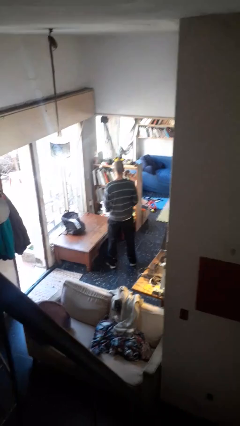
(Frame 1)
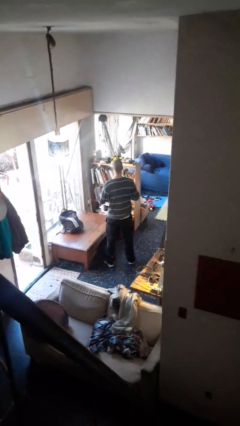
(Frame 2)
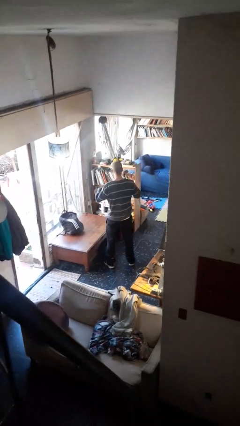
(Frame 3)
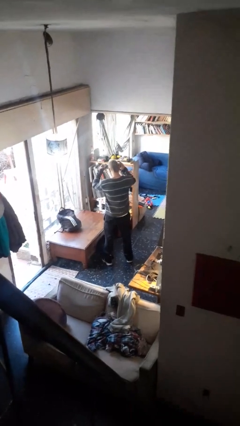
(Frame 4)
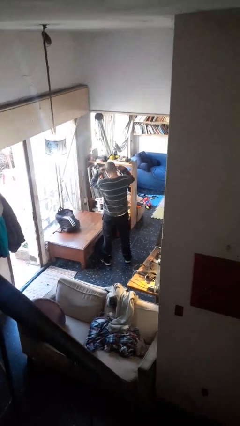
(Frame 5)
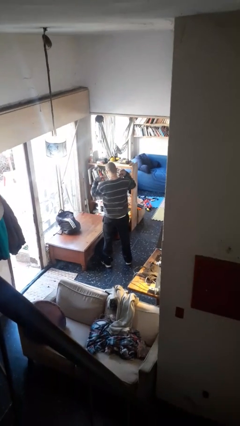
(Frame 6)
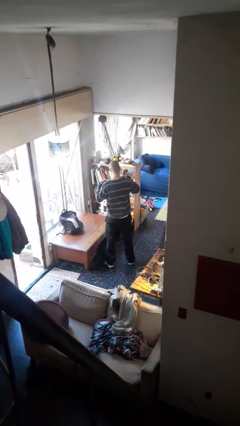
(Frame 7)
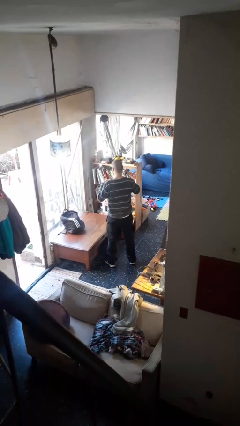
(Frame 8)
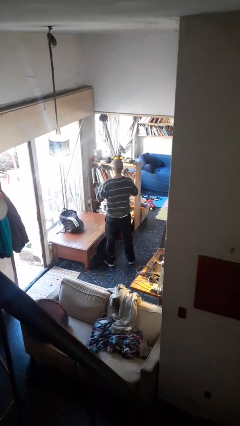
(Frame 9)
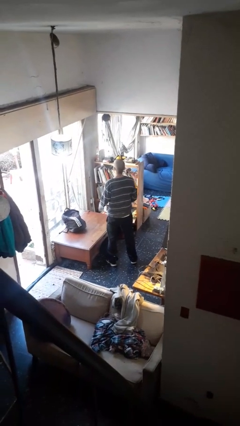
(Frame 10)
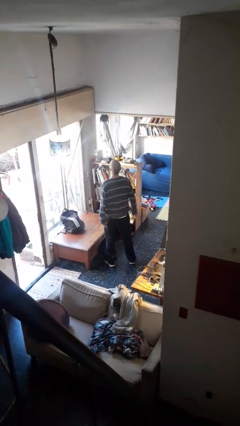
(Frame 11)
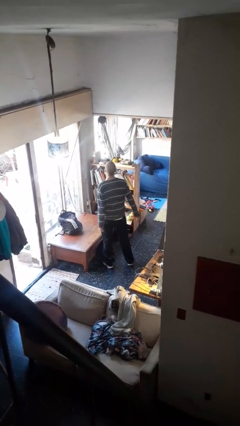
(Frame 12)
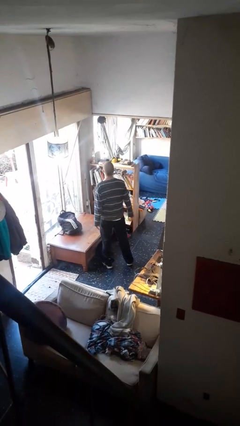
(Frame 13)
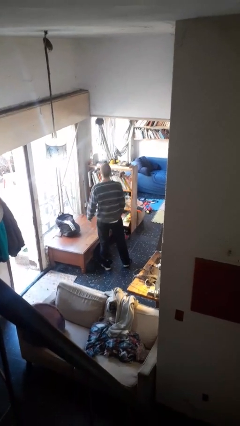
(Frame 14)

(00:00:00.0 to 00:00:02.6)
person puts on necklace

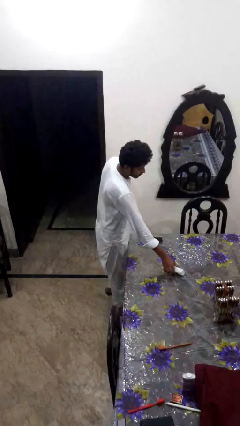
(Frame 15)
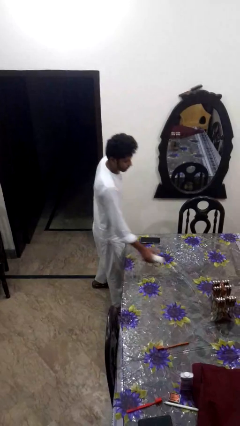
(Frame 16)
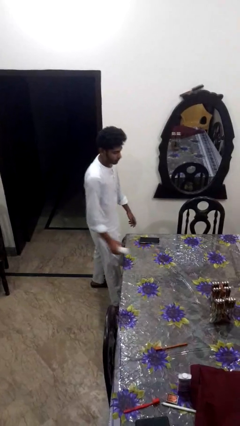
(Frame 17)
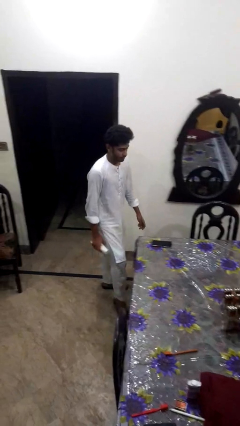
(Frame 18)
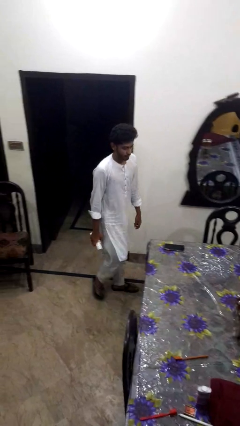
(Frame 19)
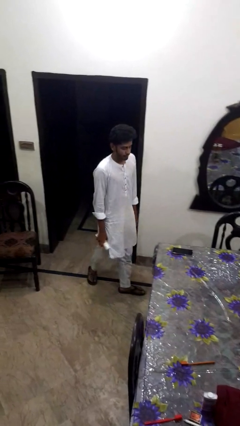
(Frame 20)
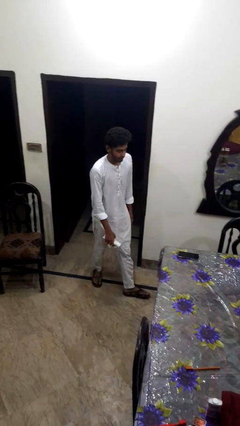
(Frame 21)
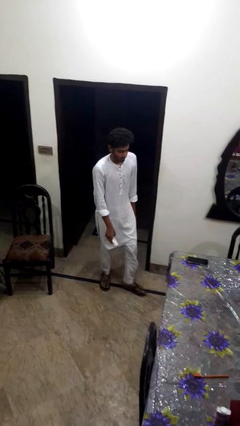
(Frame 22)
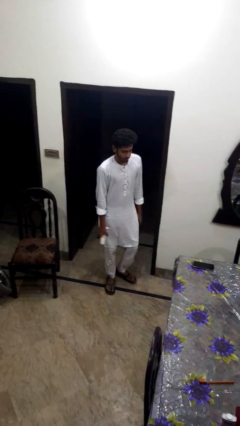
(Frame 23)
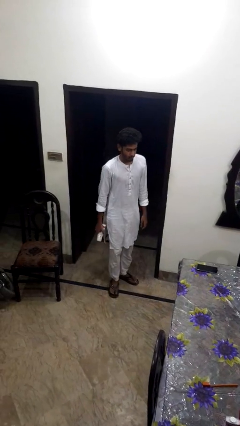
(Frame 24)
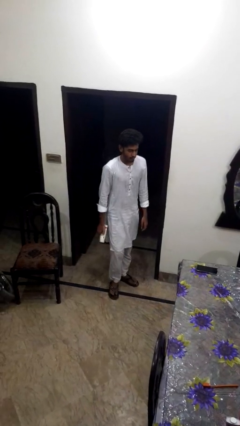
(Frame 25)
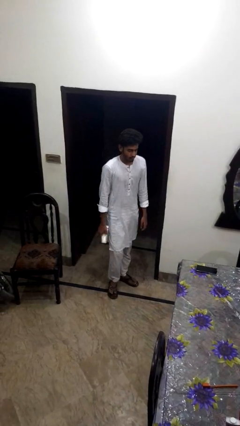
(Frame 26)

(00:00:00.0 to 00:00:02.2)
person picks up object from table

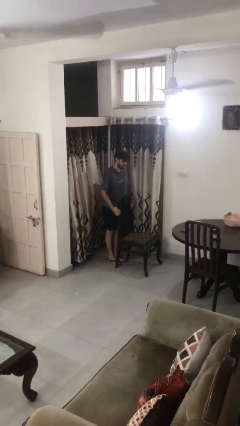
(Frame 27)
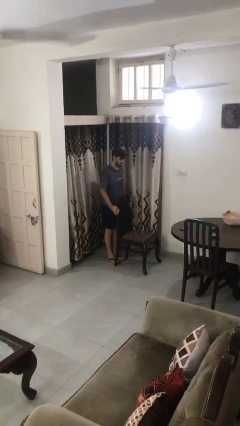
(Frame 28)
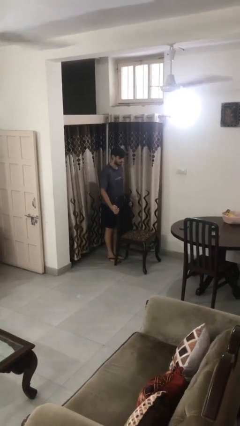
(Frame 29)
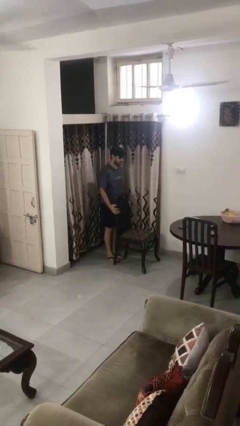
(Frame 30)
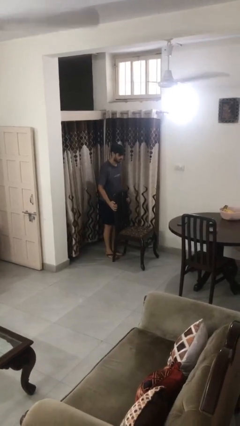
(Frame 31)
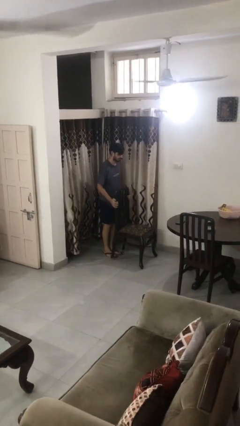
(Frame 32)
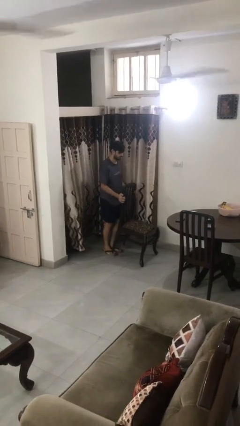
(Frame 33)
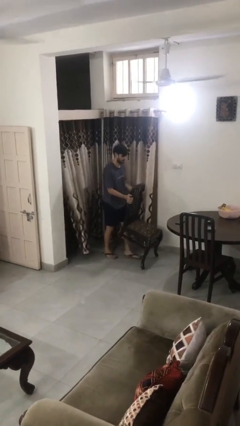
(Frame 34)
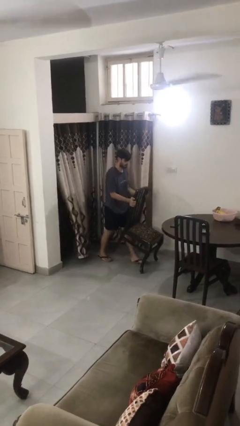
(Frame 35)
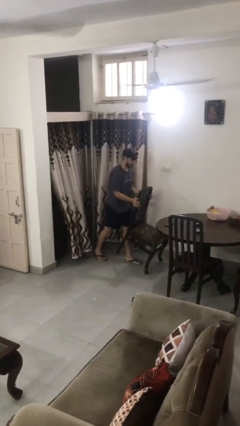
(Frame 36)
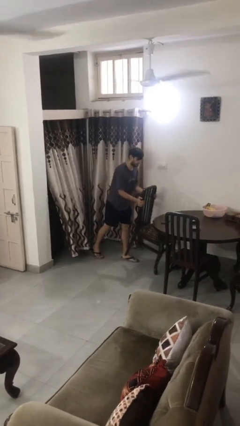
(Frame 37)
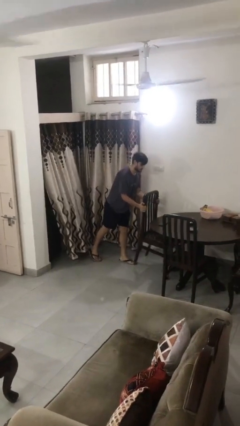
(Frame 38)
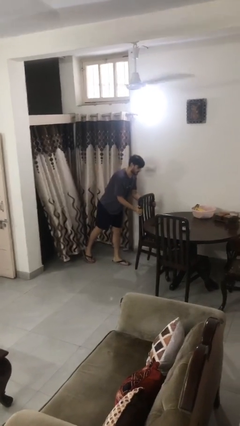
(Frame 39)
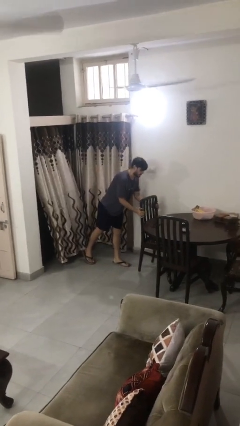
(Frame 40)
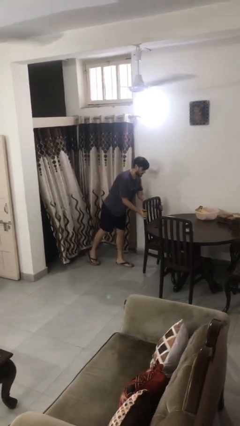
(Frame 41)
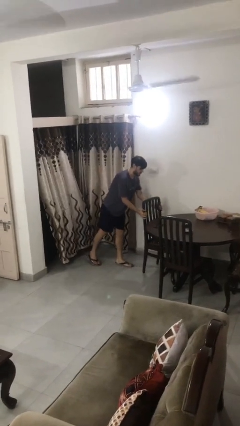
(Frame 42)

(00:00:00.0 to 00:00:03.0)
person pushes in chair

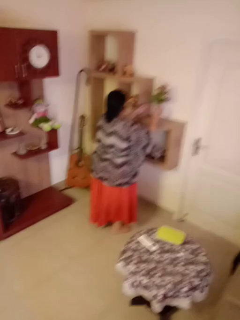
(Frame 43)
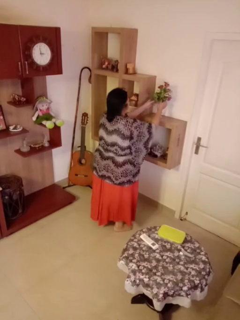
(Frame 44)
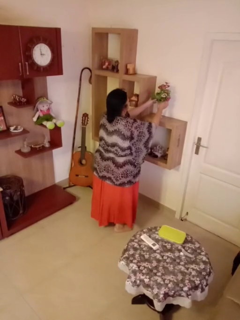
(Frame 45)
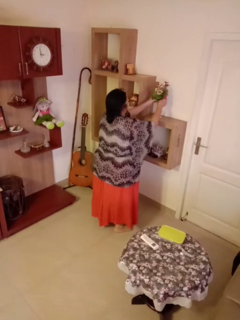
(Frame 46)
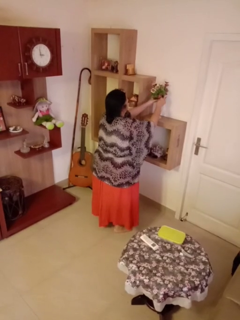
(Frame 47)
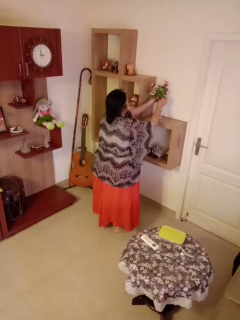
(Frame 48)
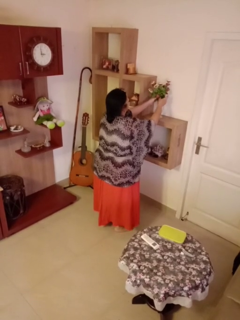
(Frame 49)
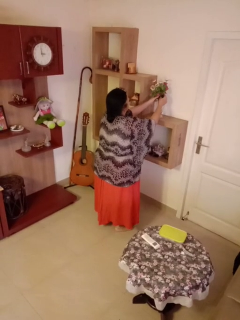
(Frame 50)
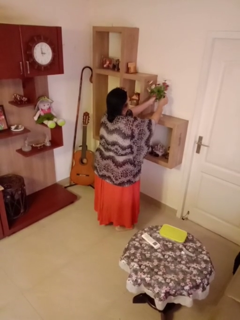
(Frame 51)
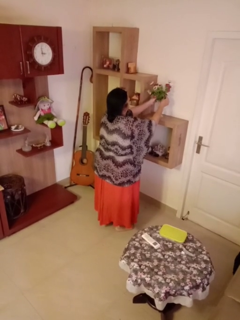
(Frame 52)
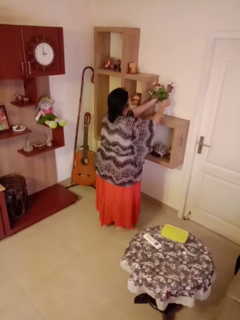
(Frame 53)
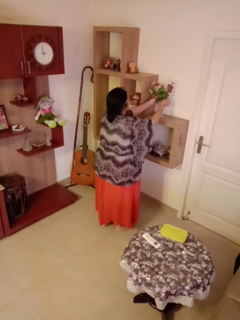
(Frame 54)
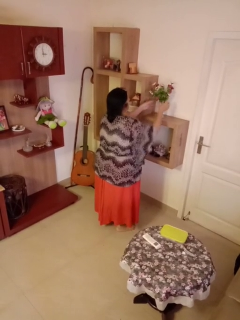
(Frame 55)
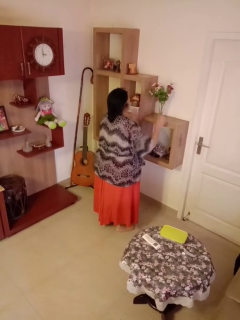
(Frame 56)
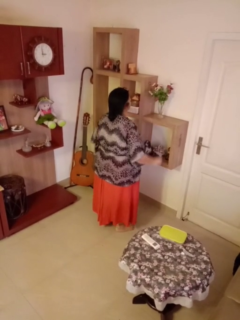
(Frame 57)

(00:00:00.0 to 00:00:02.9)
person arranges flowers in vase

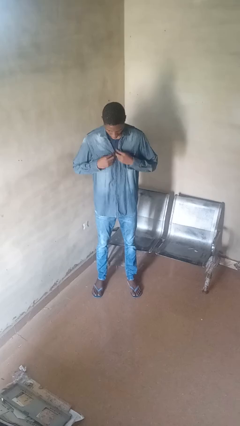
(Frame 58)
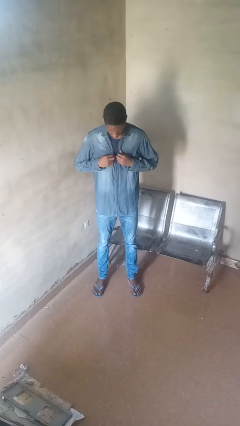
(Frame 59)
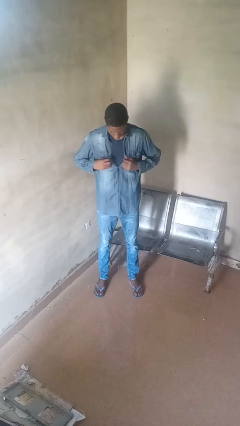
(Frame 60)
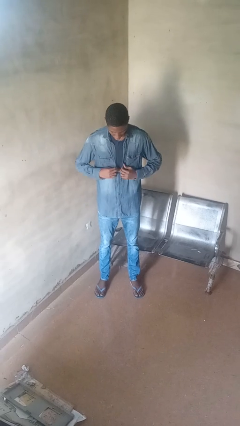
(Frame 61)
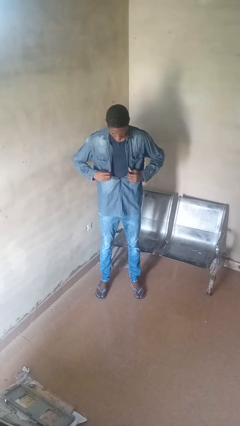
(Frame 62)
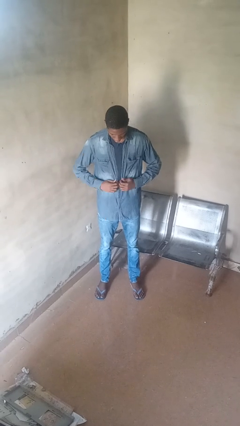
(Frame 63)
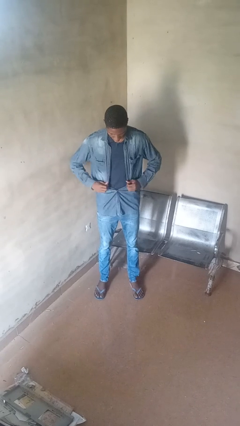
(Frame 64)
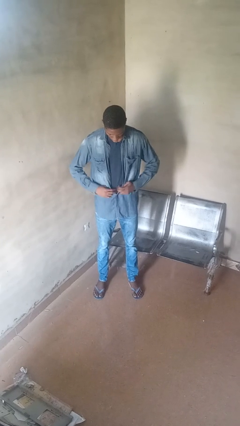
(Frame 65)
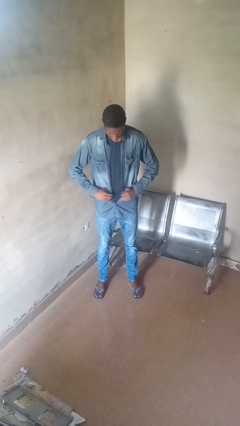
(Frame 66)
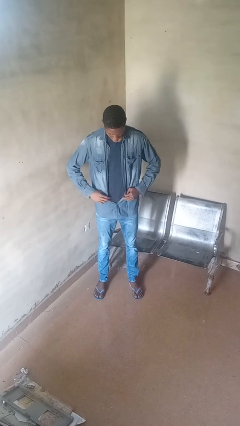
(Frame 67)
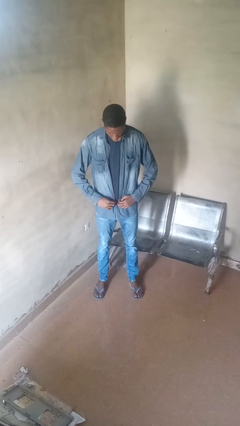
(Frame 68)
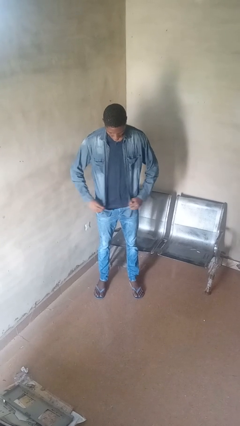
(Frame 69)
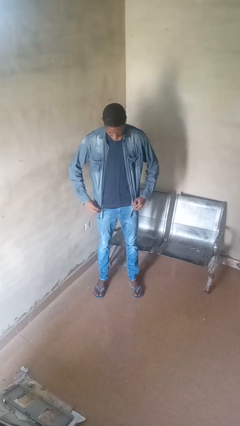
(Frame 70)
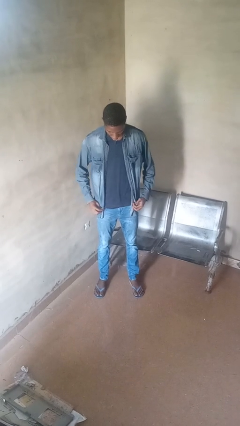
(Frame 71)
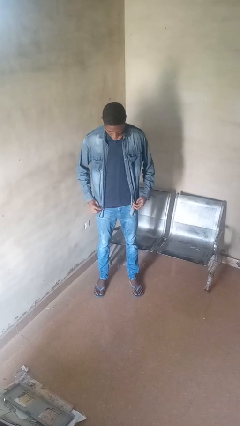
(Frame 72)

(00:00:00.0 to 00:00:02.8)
person unbuttons shirt

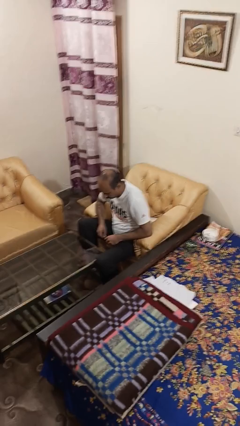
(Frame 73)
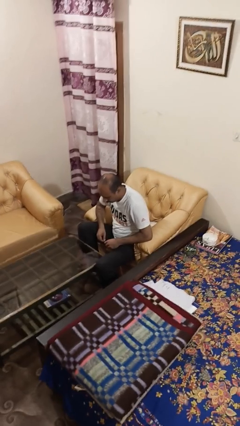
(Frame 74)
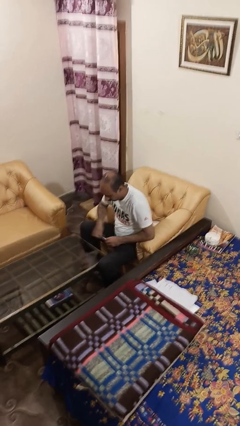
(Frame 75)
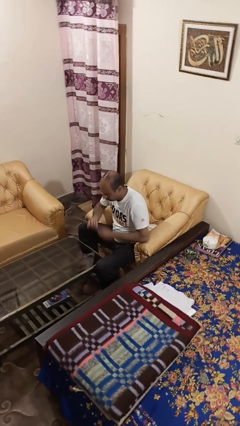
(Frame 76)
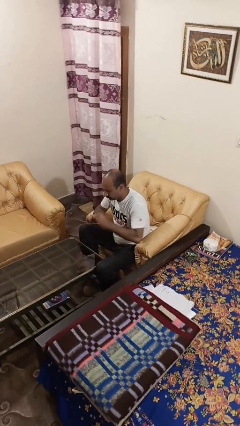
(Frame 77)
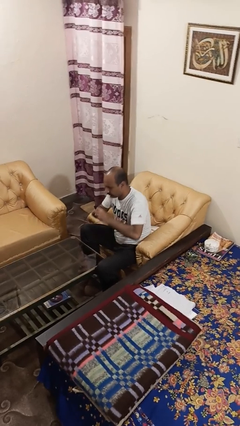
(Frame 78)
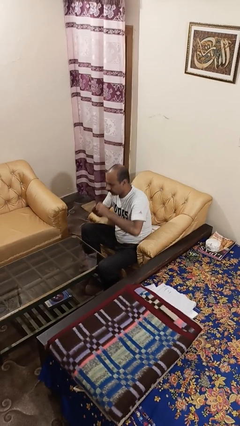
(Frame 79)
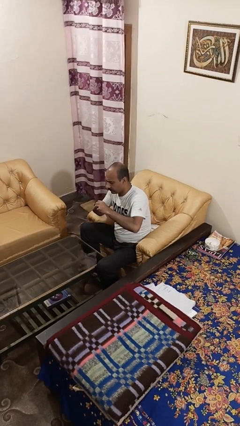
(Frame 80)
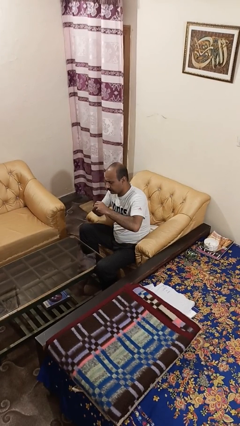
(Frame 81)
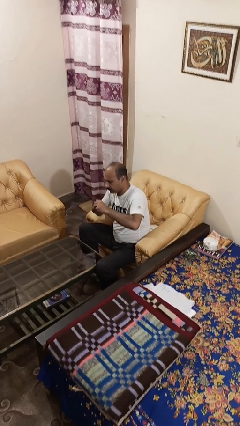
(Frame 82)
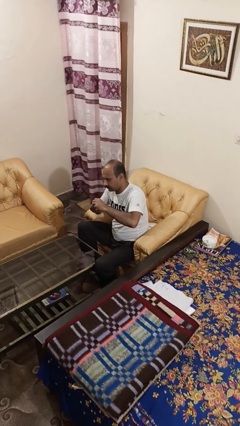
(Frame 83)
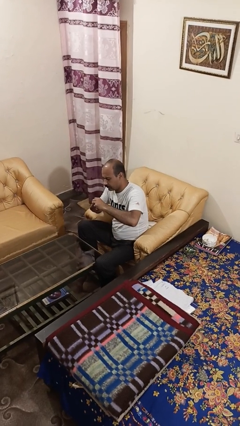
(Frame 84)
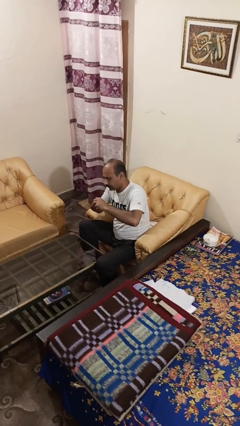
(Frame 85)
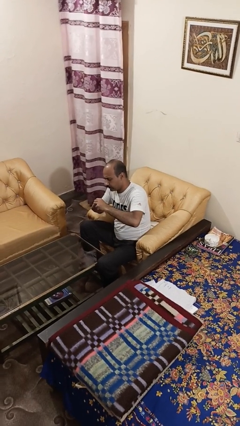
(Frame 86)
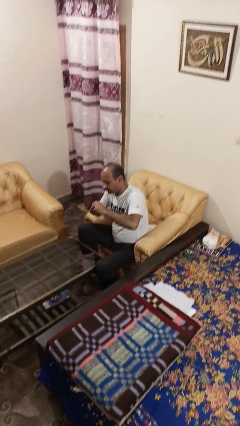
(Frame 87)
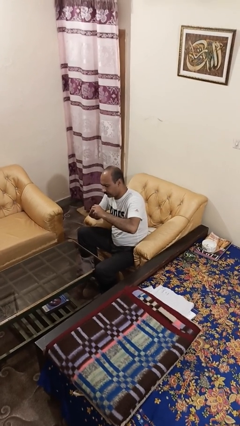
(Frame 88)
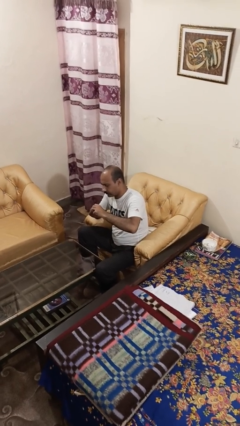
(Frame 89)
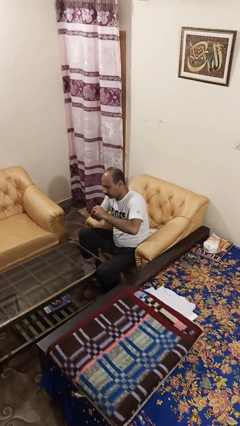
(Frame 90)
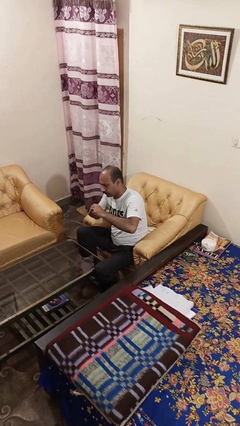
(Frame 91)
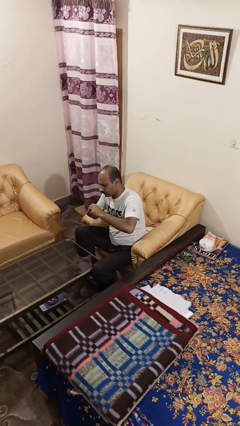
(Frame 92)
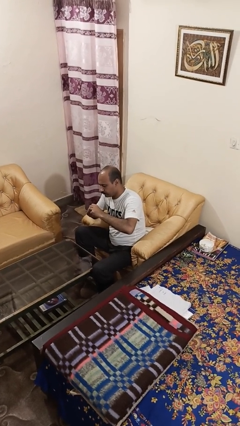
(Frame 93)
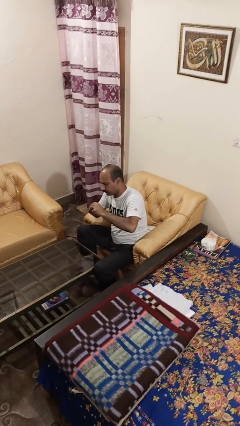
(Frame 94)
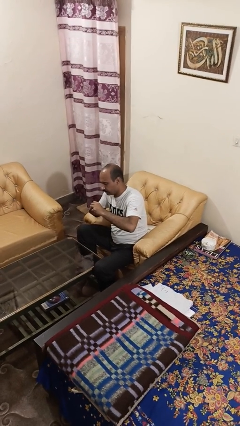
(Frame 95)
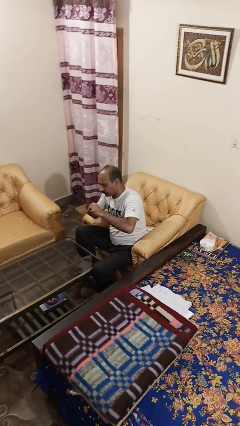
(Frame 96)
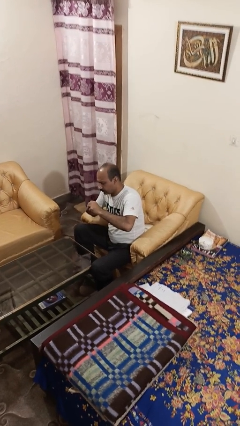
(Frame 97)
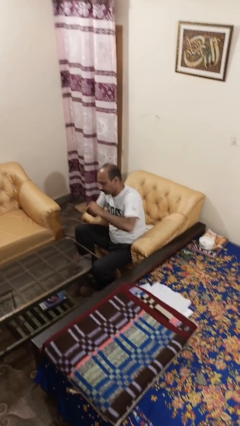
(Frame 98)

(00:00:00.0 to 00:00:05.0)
person files fingernails
